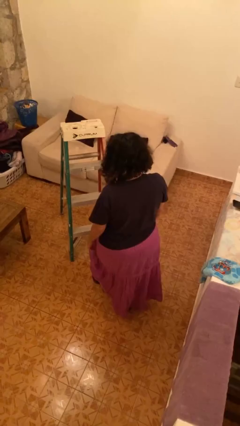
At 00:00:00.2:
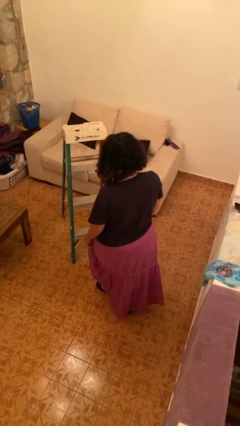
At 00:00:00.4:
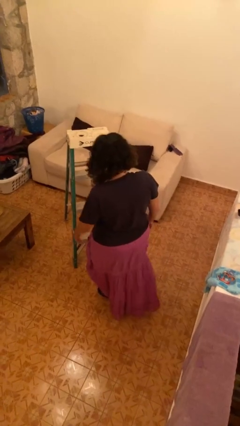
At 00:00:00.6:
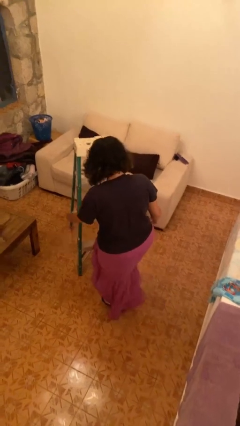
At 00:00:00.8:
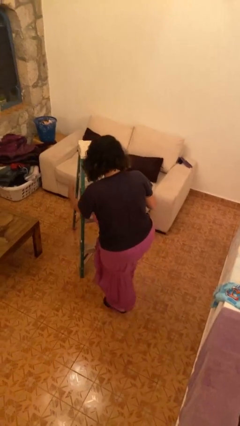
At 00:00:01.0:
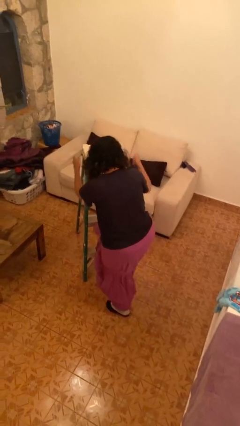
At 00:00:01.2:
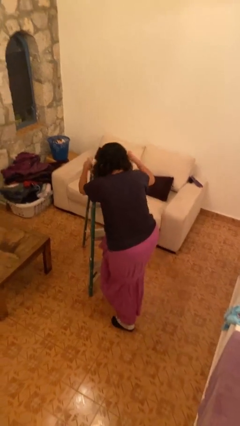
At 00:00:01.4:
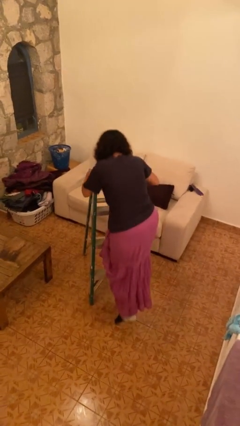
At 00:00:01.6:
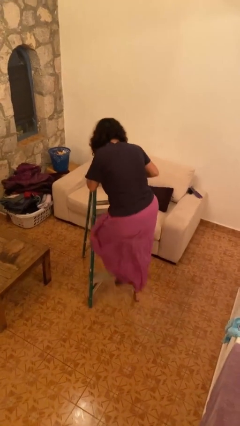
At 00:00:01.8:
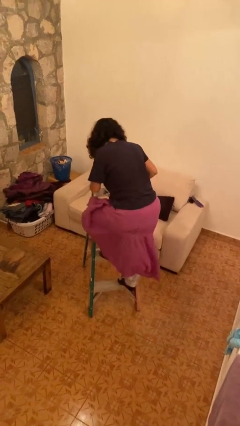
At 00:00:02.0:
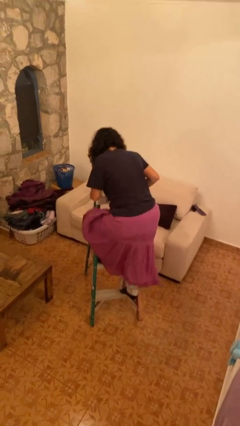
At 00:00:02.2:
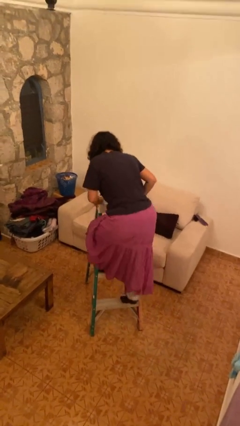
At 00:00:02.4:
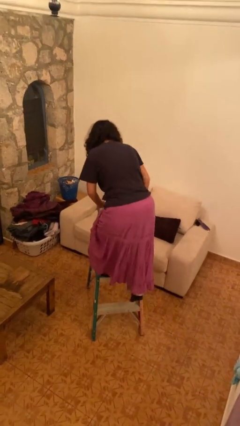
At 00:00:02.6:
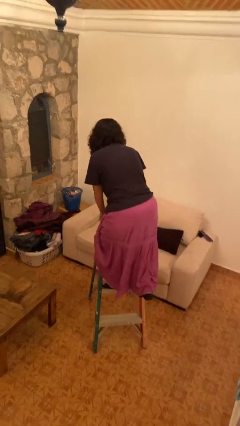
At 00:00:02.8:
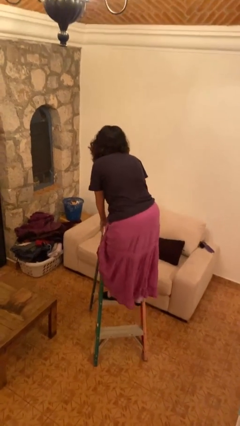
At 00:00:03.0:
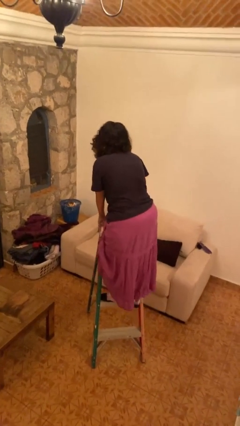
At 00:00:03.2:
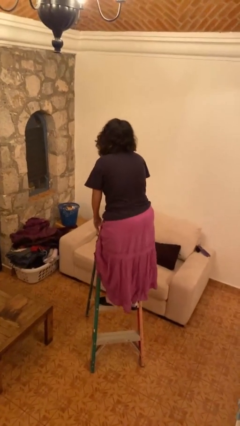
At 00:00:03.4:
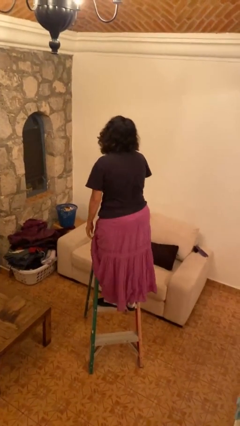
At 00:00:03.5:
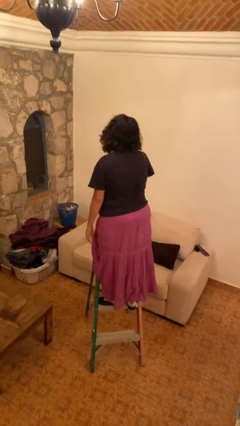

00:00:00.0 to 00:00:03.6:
person climbs up ladder

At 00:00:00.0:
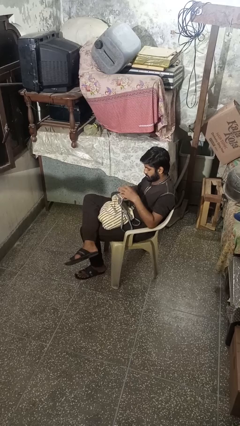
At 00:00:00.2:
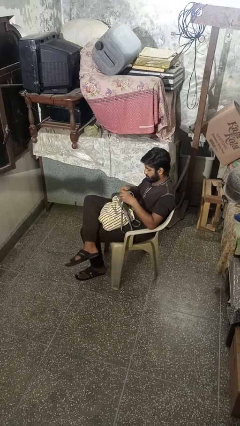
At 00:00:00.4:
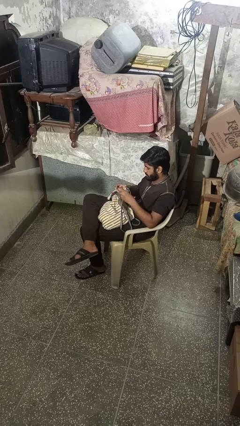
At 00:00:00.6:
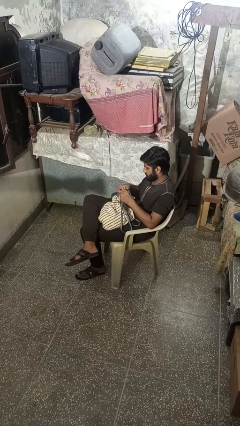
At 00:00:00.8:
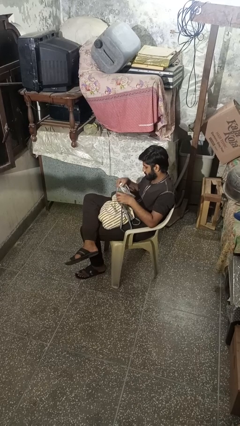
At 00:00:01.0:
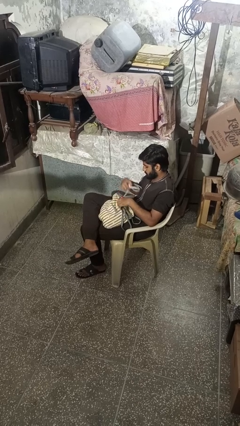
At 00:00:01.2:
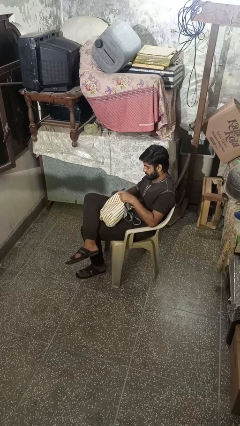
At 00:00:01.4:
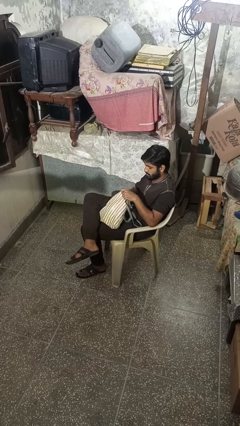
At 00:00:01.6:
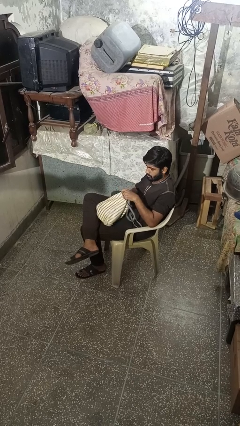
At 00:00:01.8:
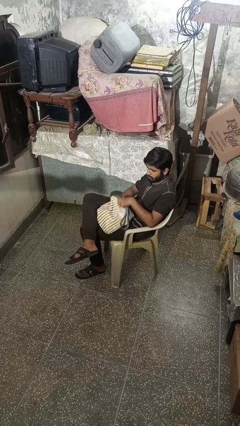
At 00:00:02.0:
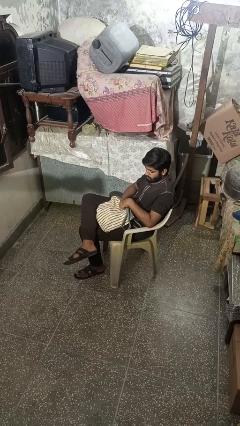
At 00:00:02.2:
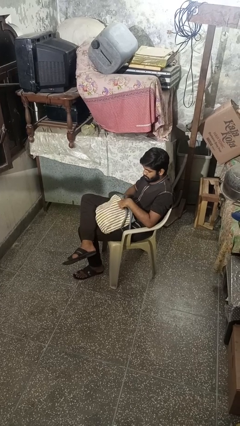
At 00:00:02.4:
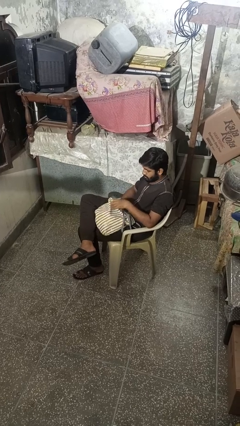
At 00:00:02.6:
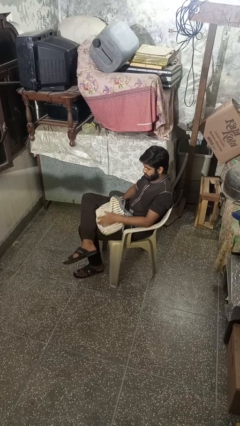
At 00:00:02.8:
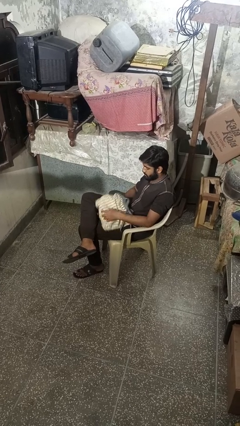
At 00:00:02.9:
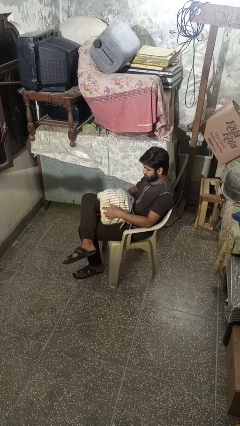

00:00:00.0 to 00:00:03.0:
person puts object into purse

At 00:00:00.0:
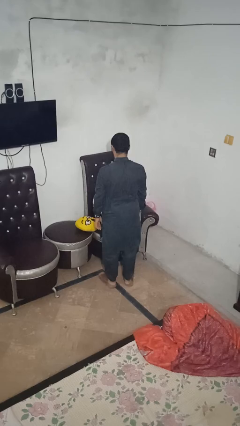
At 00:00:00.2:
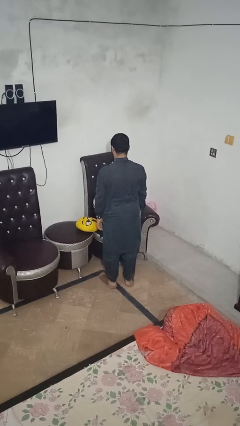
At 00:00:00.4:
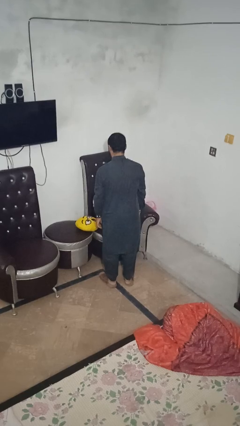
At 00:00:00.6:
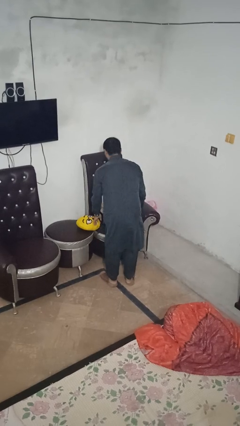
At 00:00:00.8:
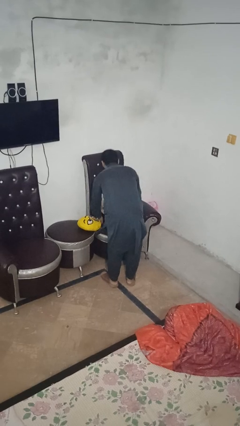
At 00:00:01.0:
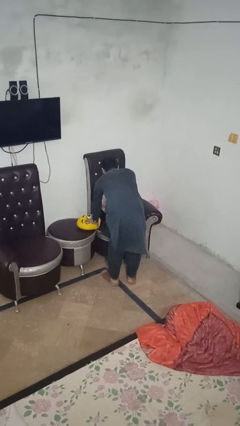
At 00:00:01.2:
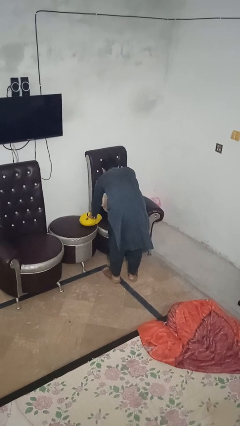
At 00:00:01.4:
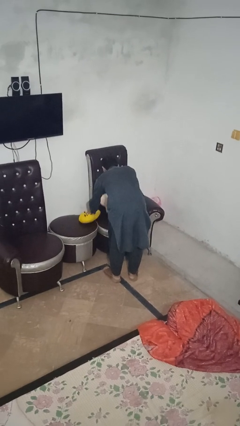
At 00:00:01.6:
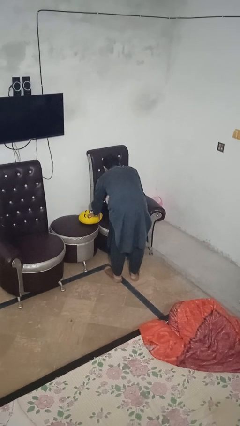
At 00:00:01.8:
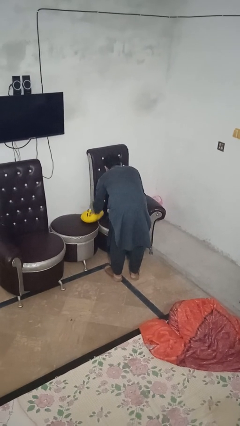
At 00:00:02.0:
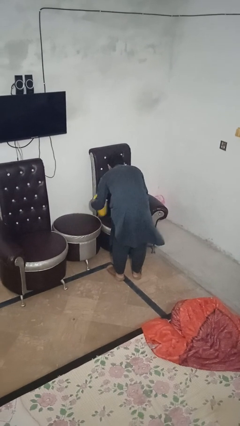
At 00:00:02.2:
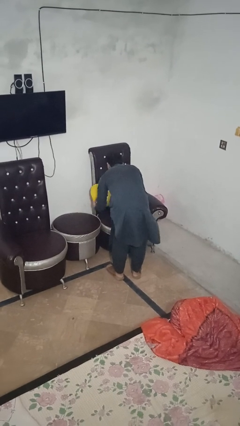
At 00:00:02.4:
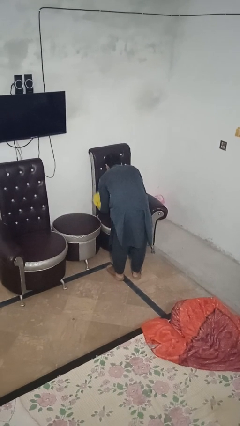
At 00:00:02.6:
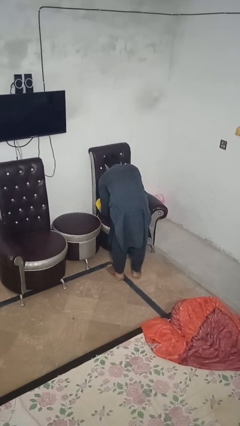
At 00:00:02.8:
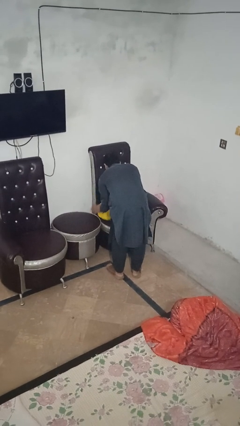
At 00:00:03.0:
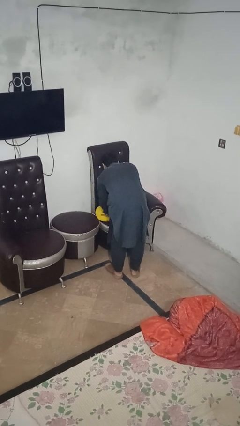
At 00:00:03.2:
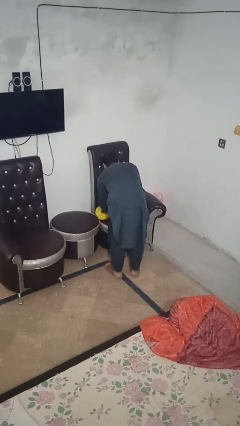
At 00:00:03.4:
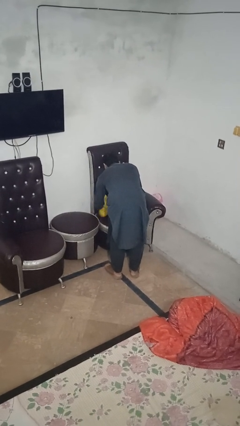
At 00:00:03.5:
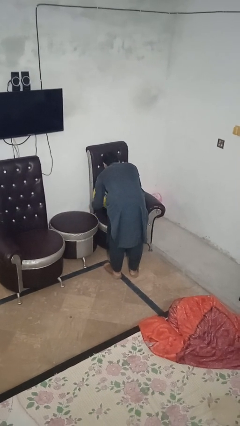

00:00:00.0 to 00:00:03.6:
person searches in couch

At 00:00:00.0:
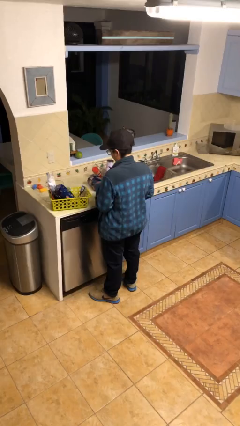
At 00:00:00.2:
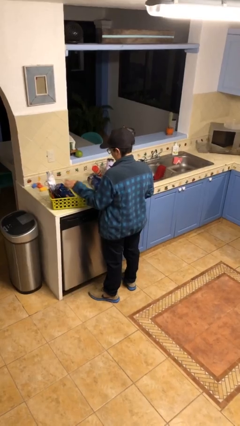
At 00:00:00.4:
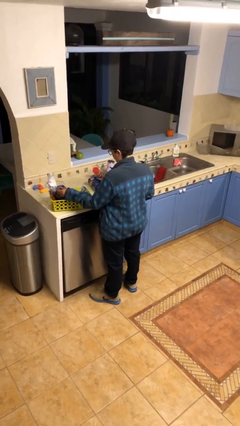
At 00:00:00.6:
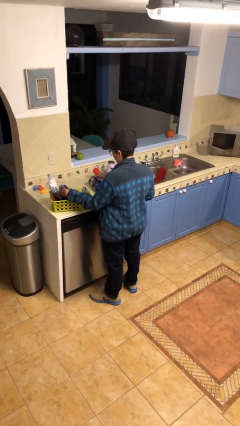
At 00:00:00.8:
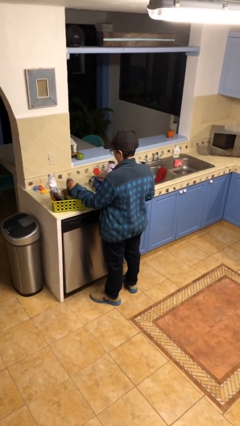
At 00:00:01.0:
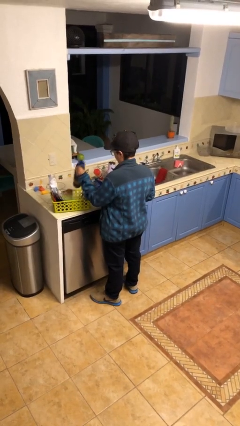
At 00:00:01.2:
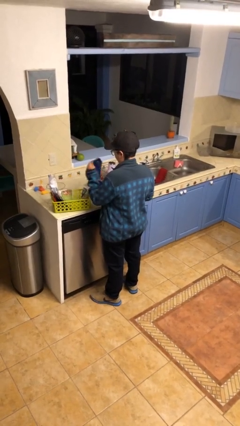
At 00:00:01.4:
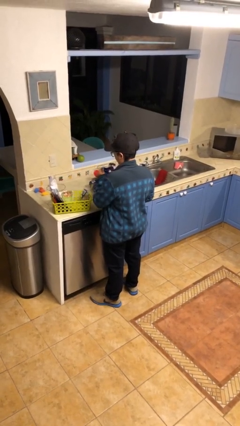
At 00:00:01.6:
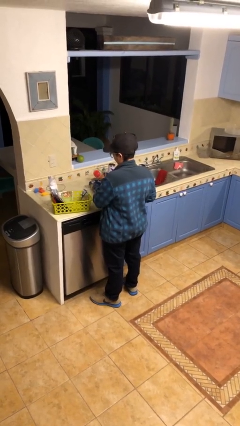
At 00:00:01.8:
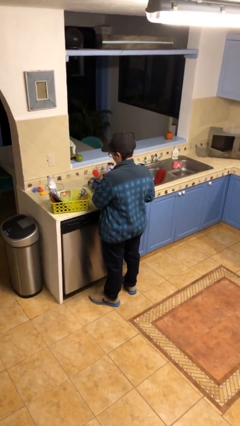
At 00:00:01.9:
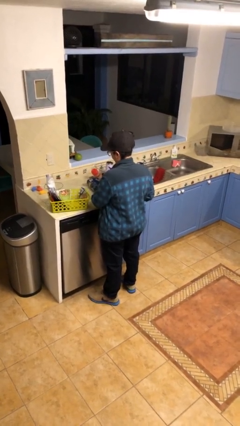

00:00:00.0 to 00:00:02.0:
person takes object from basket

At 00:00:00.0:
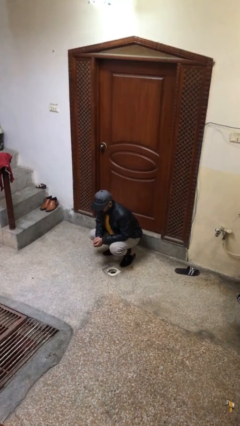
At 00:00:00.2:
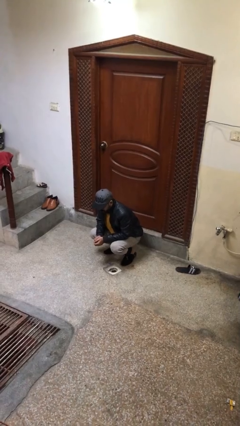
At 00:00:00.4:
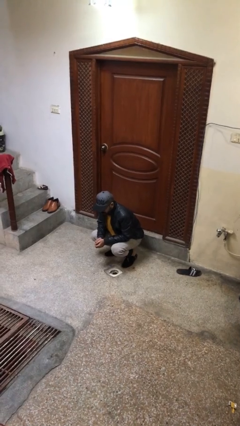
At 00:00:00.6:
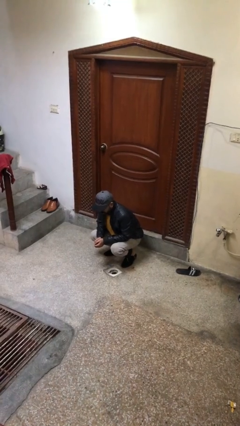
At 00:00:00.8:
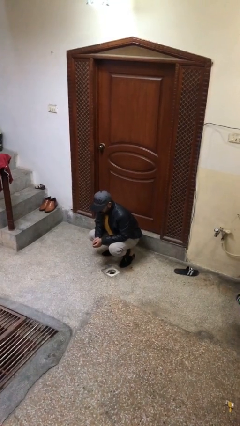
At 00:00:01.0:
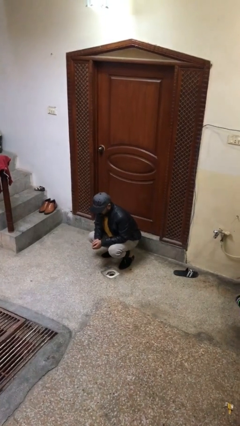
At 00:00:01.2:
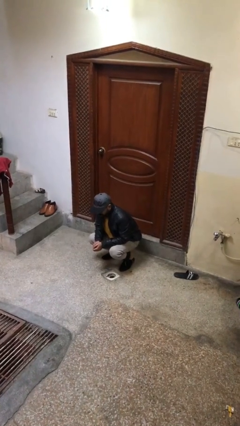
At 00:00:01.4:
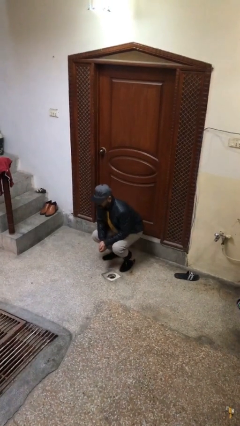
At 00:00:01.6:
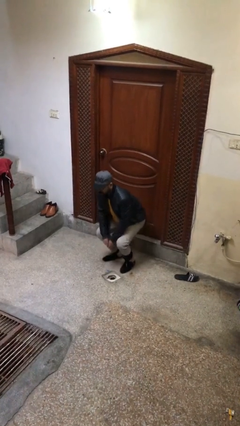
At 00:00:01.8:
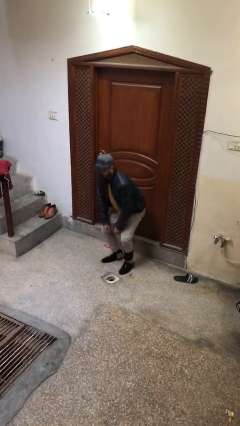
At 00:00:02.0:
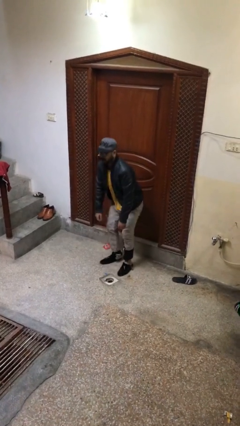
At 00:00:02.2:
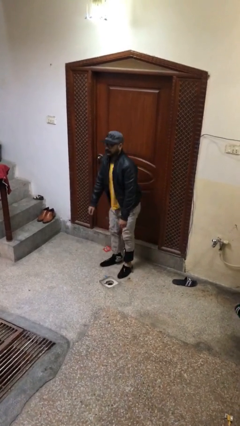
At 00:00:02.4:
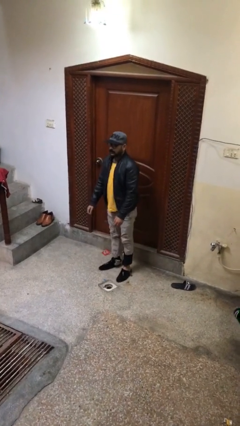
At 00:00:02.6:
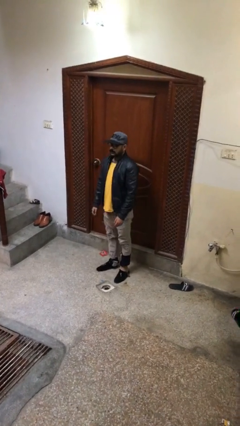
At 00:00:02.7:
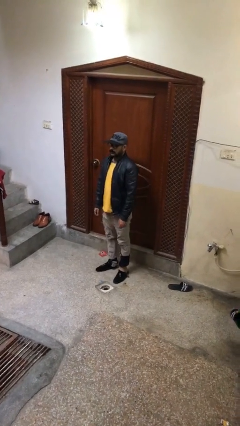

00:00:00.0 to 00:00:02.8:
person stands up

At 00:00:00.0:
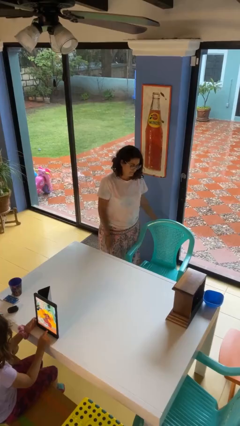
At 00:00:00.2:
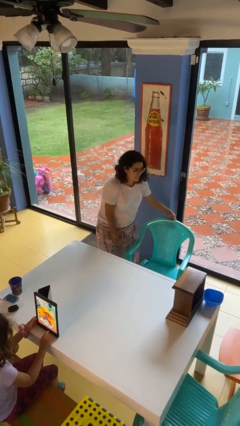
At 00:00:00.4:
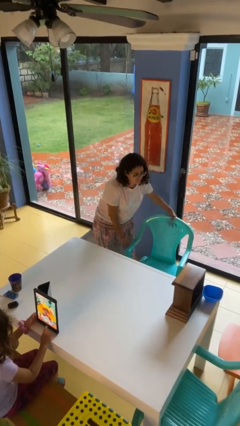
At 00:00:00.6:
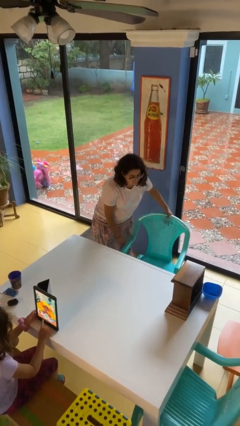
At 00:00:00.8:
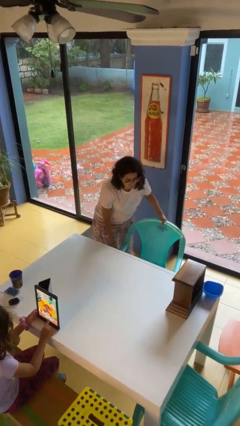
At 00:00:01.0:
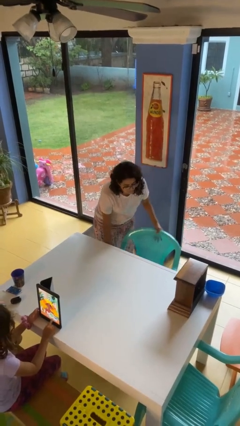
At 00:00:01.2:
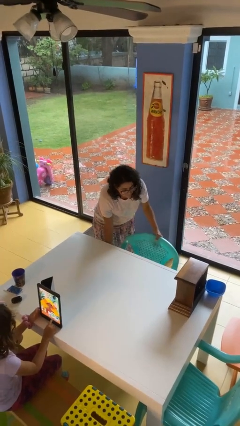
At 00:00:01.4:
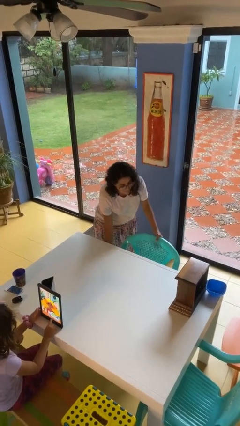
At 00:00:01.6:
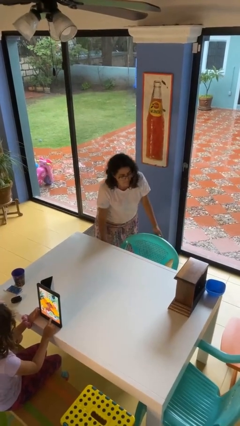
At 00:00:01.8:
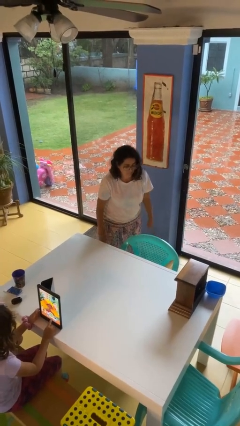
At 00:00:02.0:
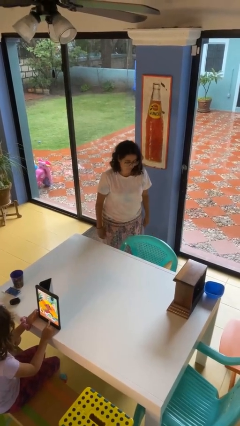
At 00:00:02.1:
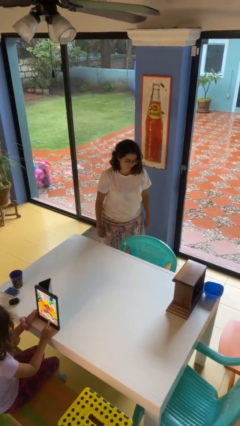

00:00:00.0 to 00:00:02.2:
person pushes in chair
